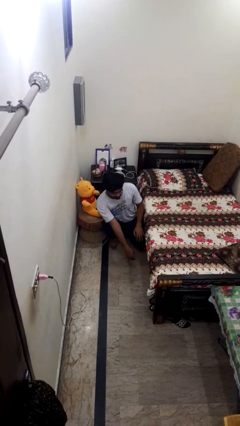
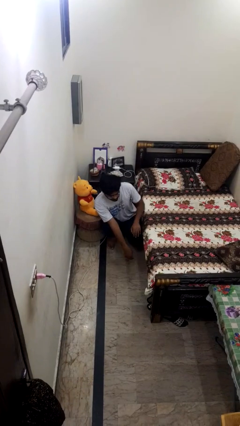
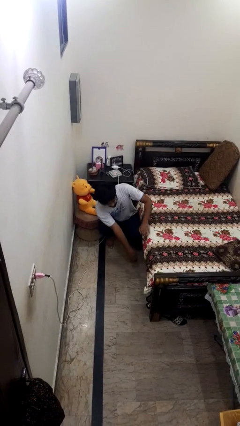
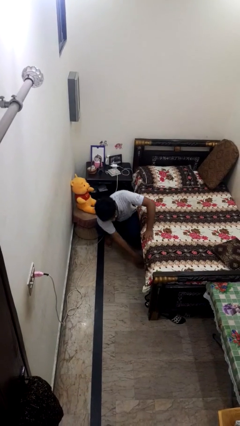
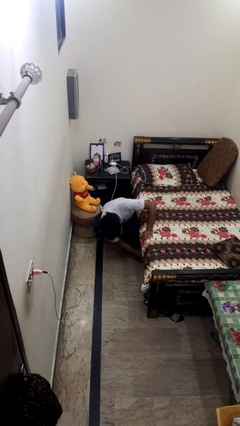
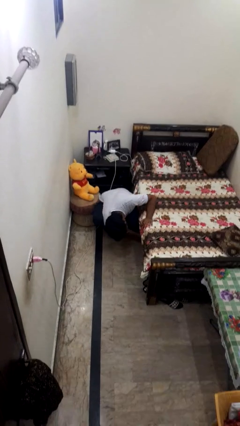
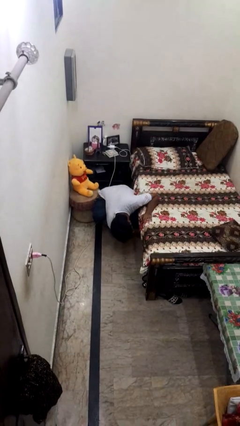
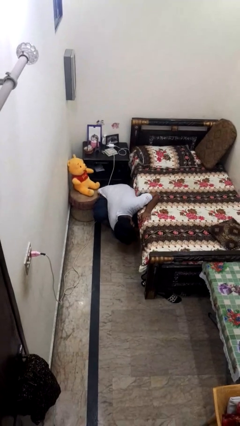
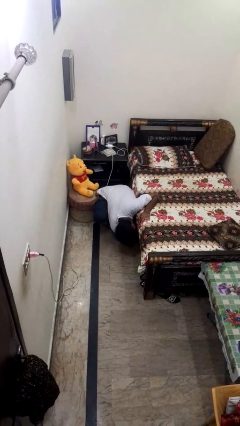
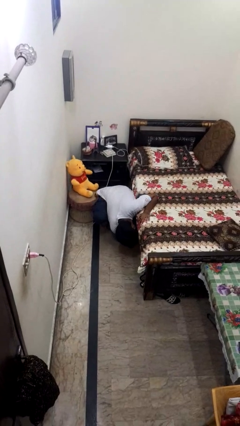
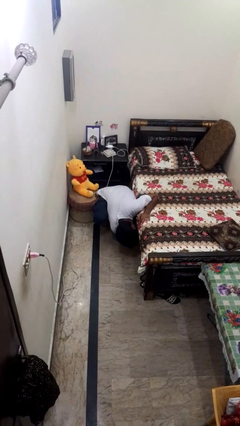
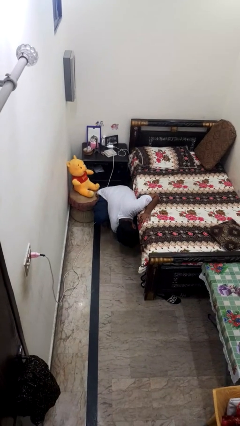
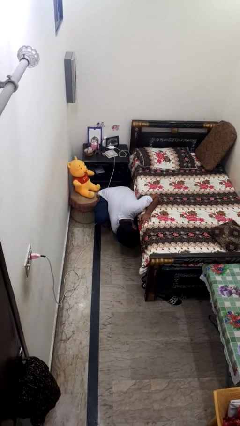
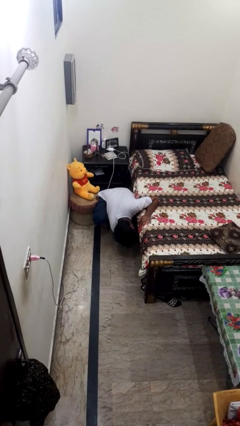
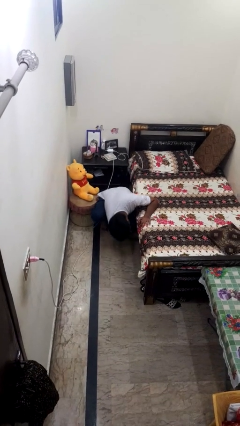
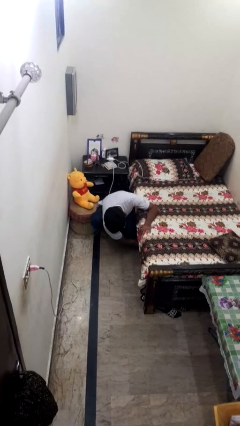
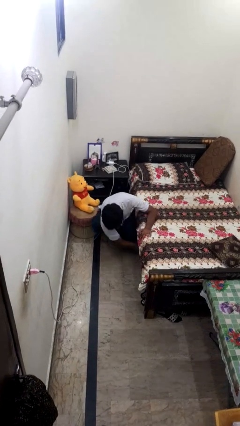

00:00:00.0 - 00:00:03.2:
person searches under bed

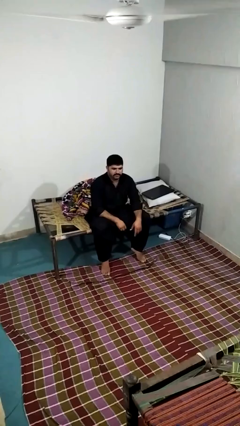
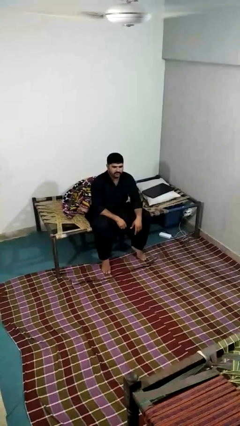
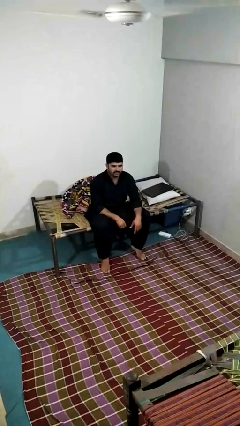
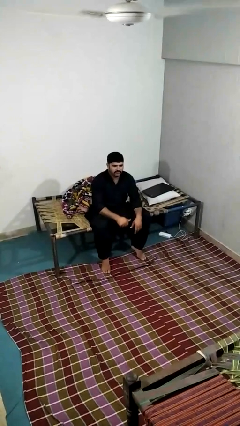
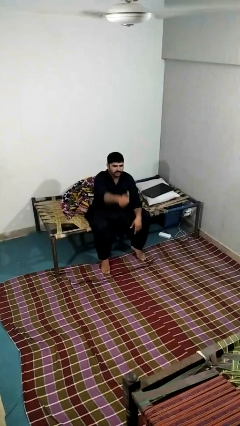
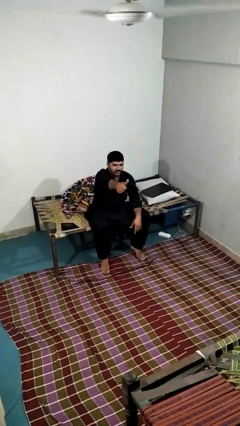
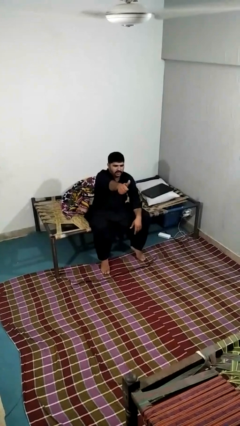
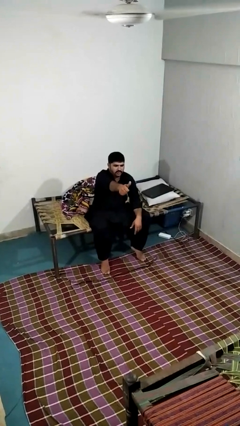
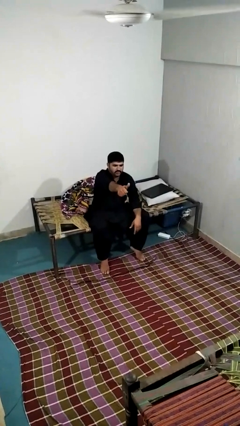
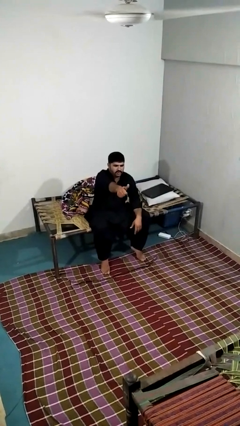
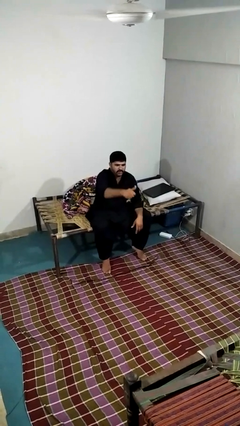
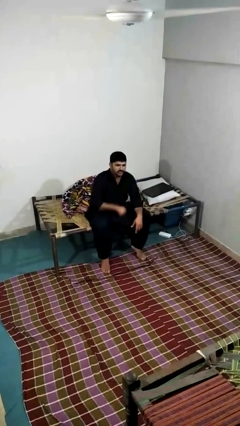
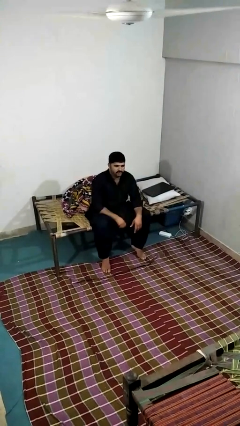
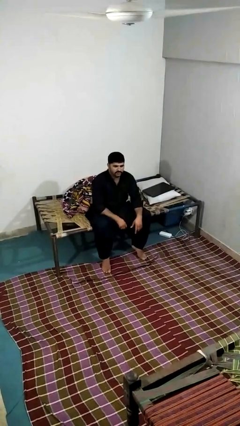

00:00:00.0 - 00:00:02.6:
person gestures thumbs up

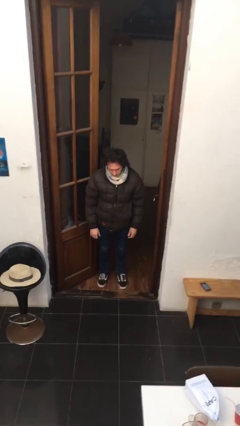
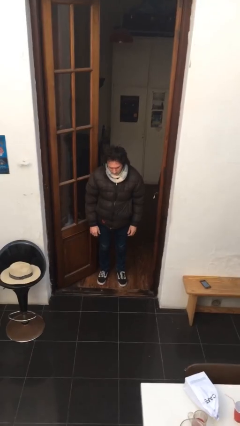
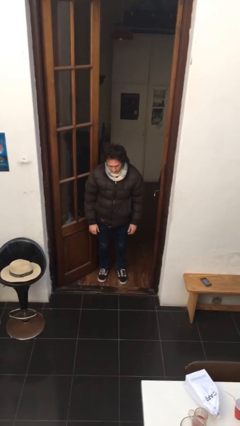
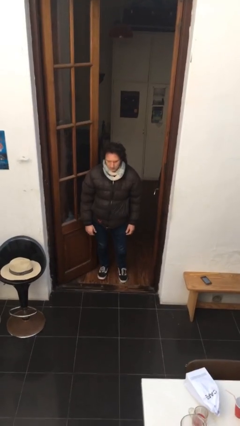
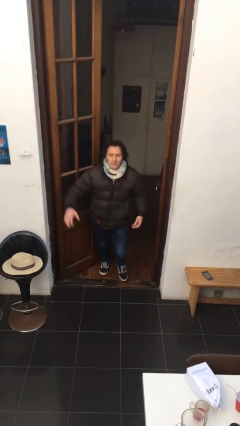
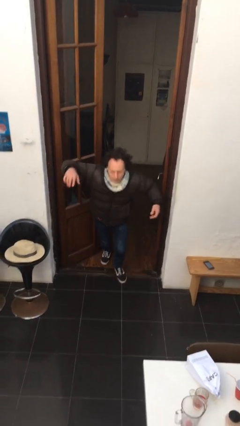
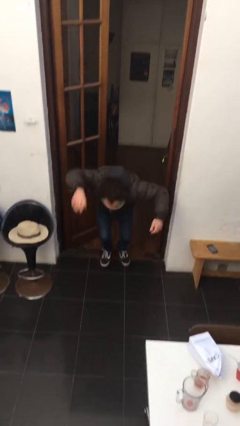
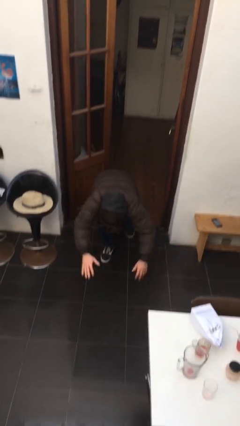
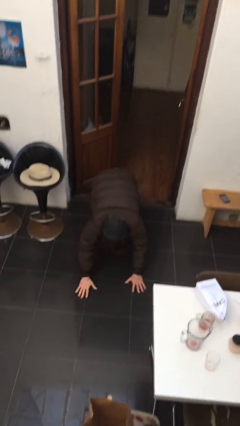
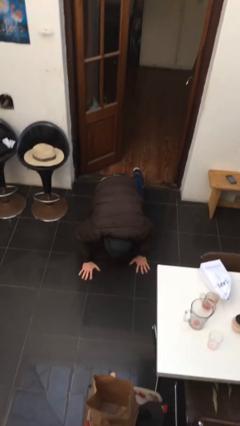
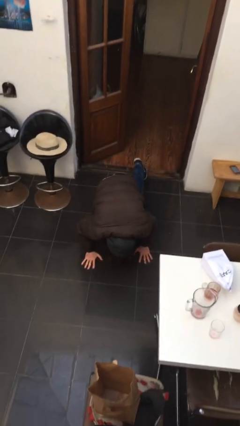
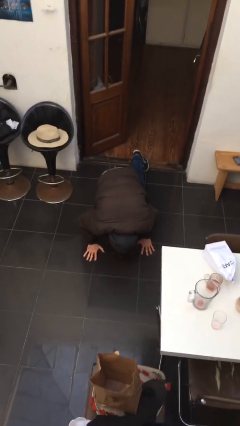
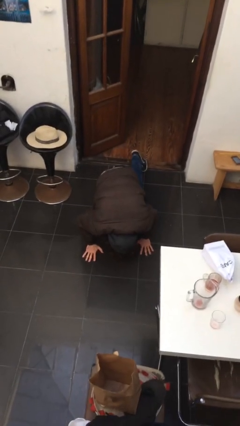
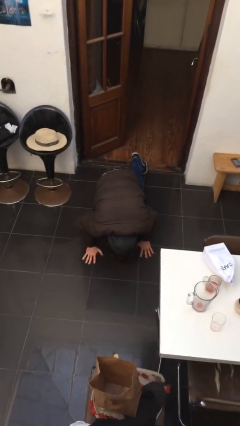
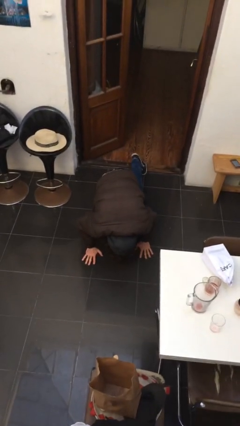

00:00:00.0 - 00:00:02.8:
person trips on object on floor

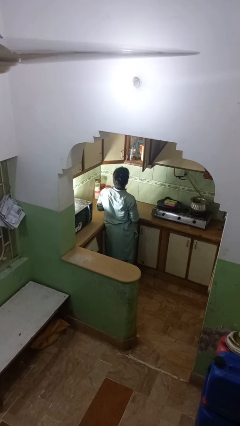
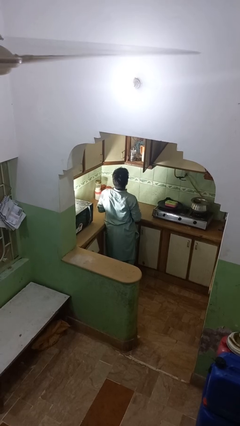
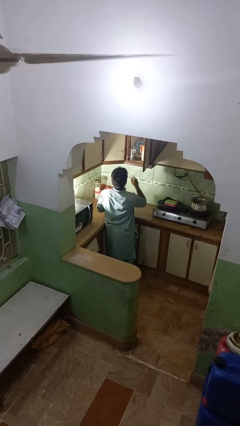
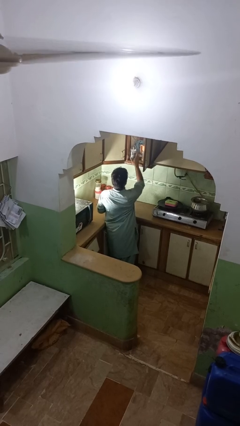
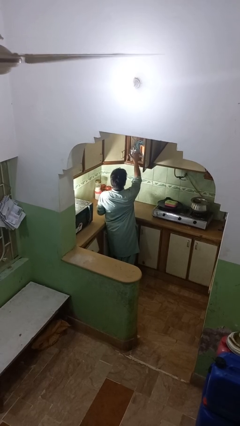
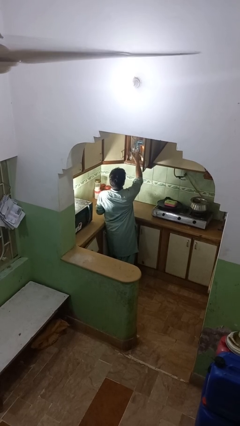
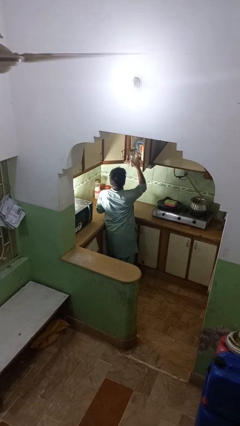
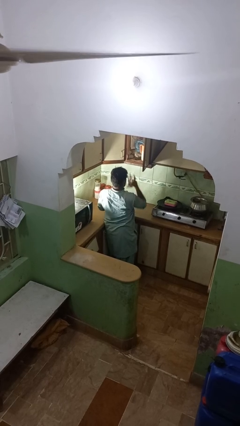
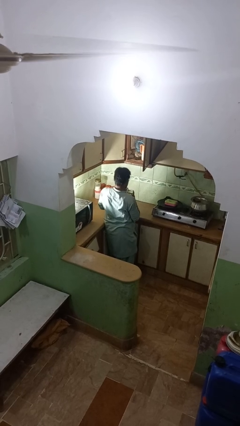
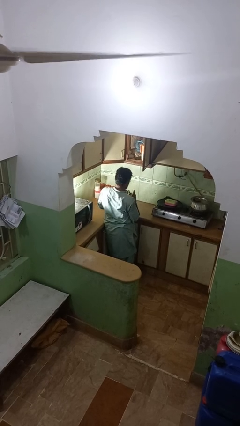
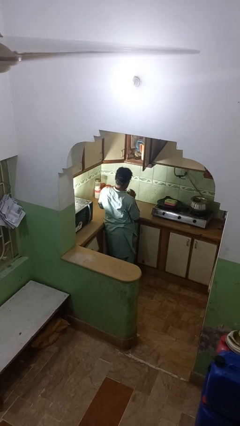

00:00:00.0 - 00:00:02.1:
person takes object from kitchen drawer

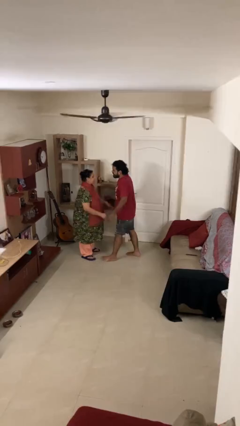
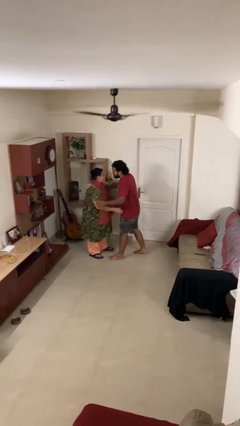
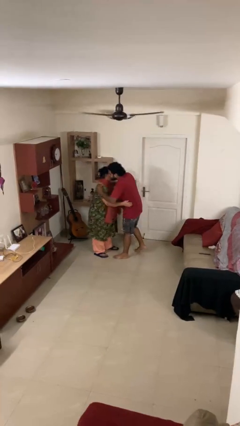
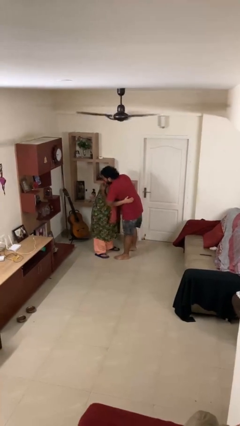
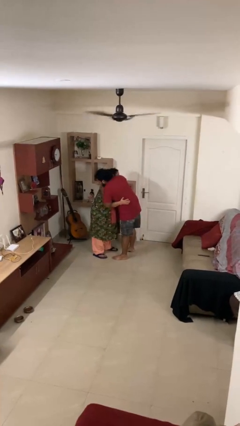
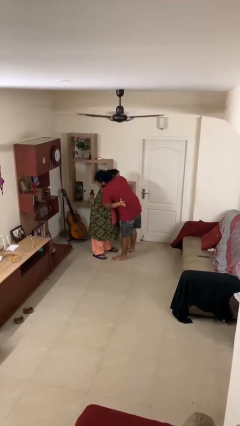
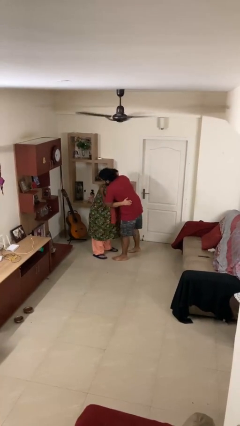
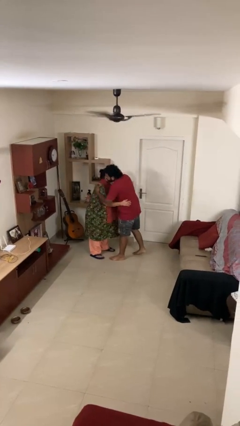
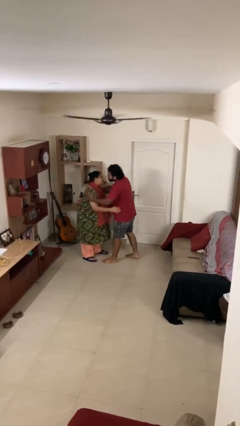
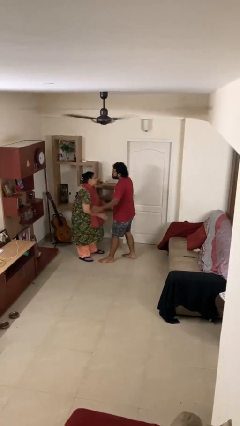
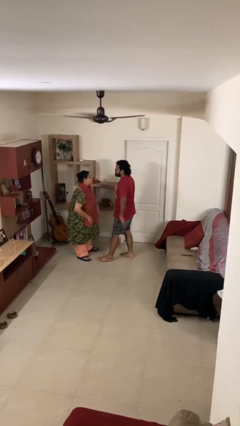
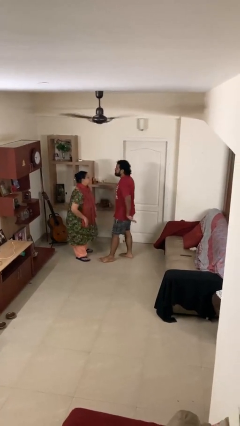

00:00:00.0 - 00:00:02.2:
person embraces person

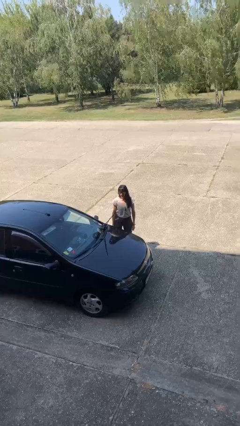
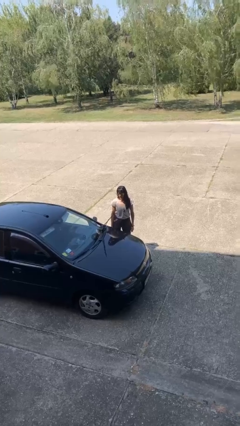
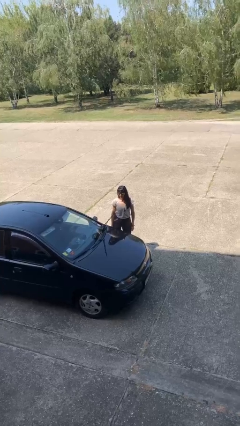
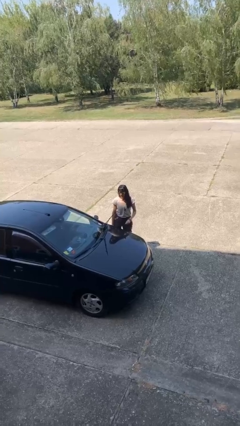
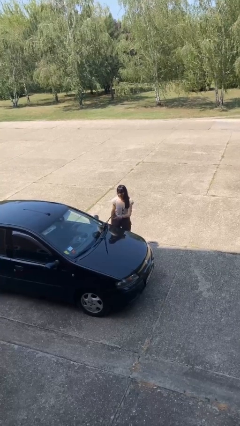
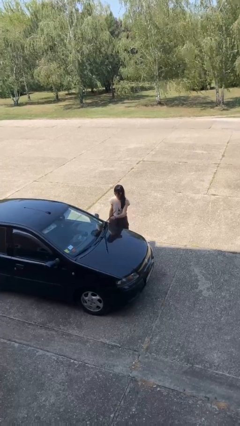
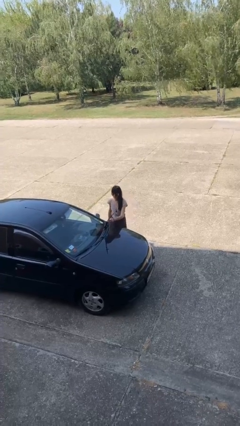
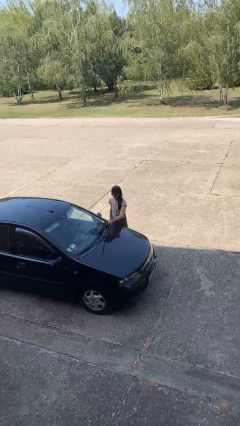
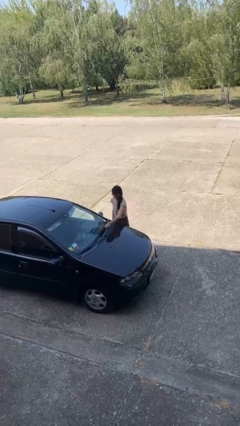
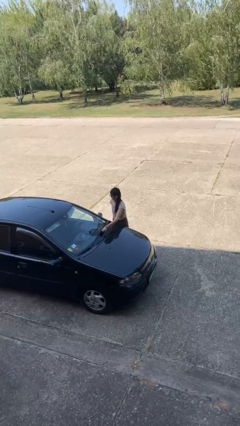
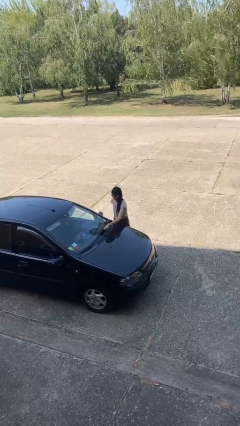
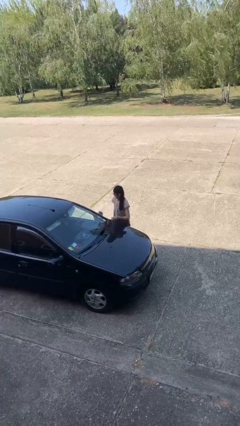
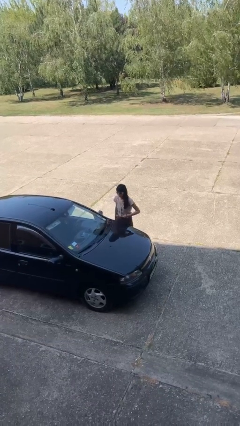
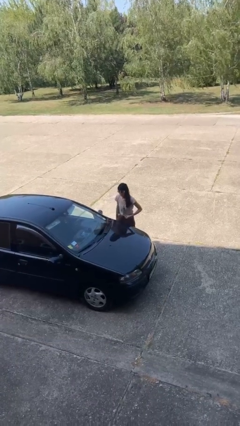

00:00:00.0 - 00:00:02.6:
person flips down car wipers

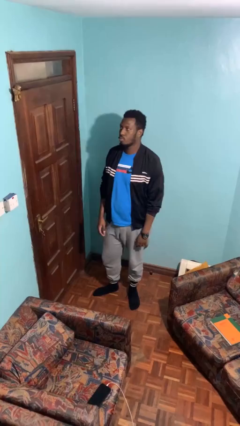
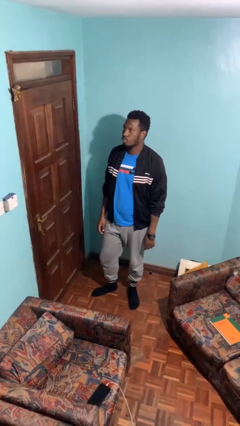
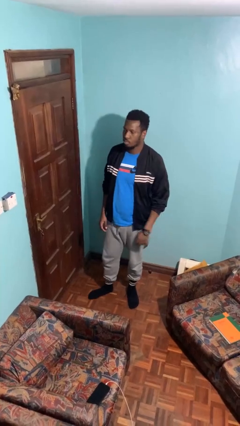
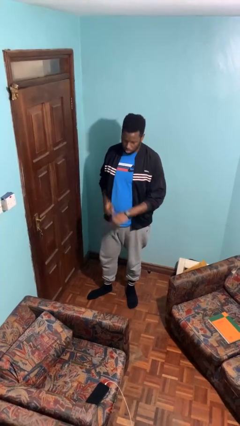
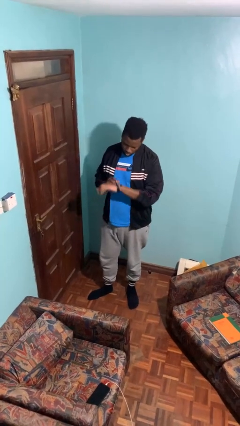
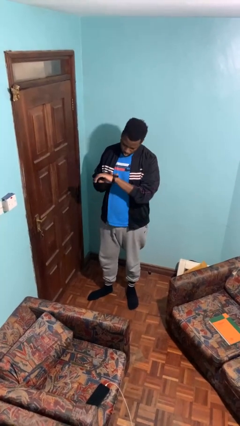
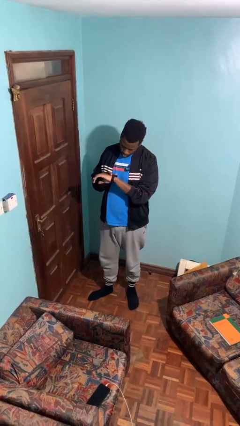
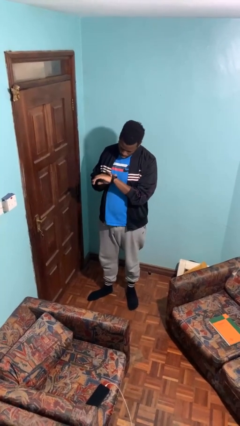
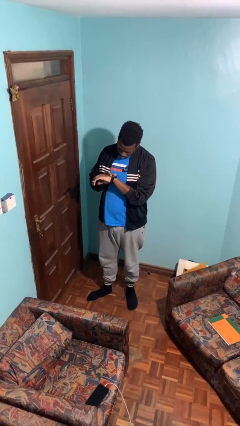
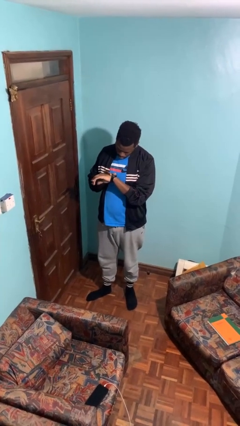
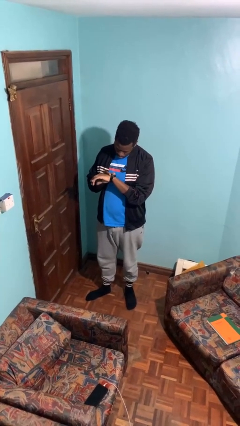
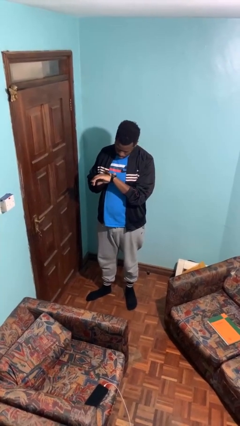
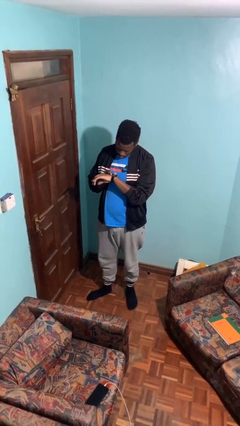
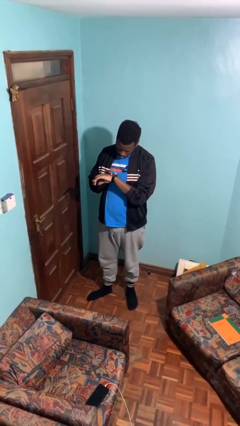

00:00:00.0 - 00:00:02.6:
person looks at wristwatch
